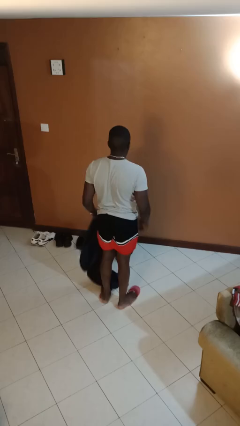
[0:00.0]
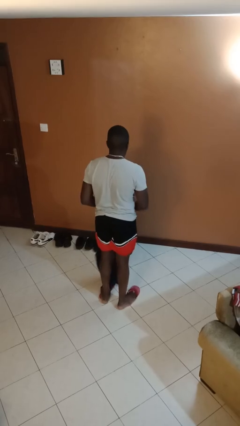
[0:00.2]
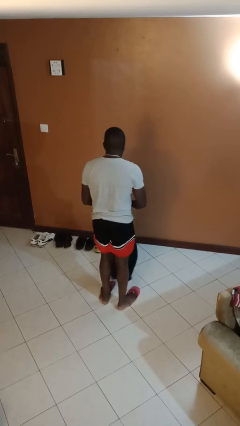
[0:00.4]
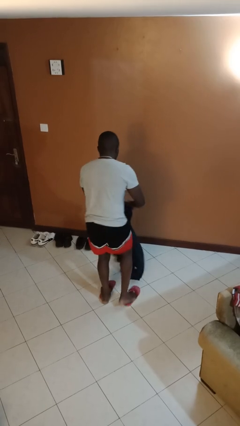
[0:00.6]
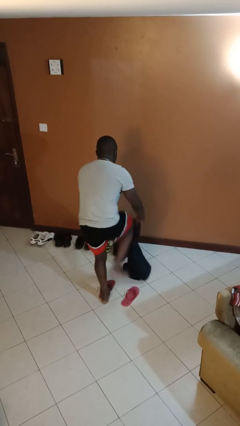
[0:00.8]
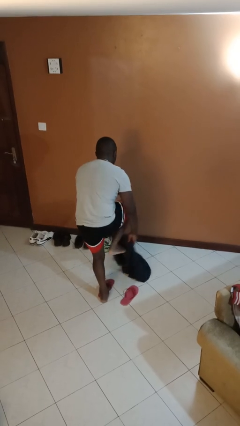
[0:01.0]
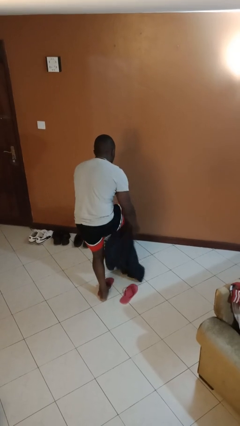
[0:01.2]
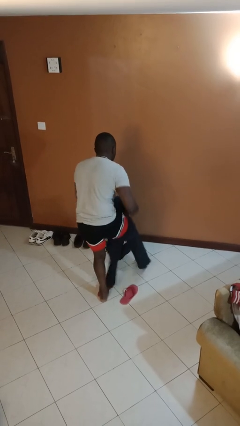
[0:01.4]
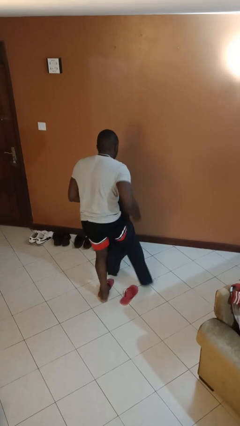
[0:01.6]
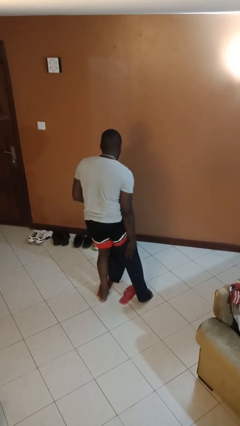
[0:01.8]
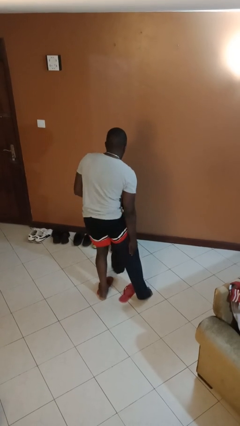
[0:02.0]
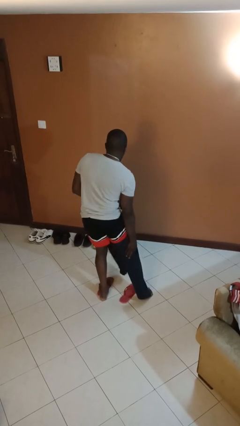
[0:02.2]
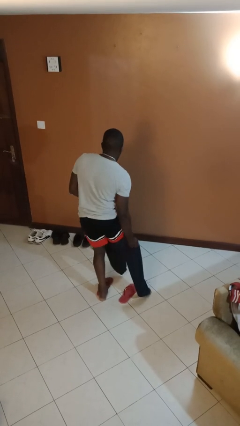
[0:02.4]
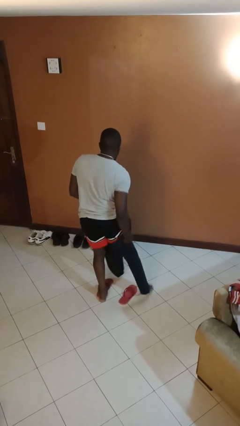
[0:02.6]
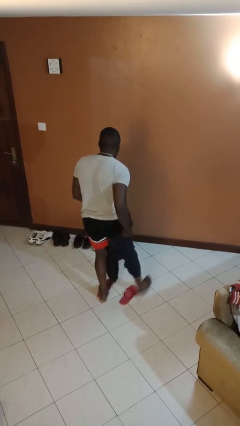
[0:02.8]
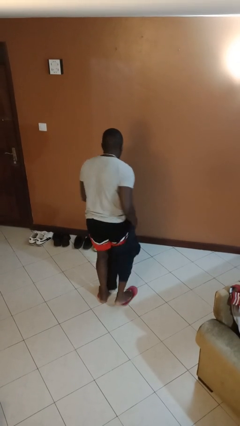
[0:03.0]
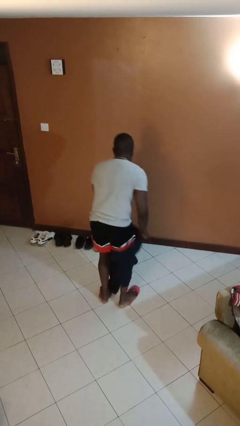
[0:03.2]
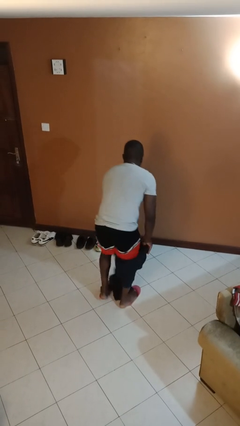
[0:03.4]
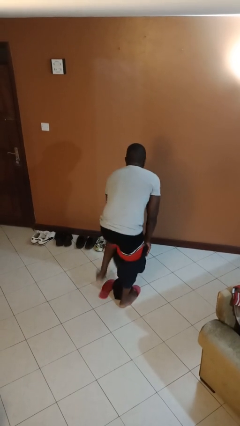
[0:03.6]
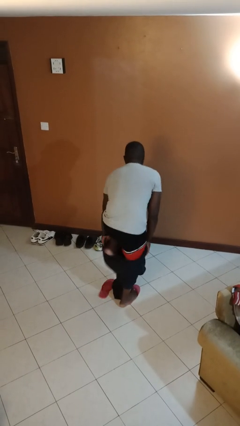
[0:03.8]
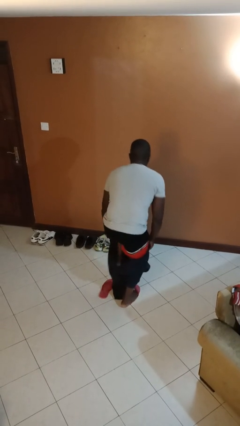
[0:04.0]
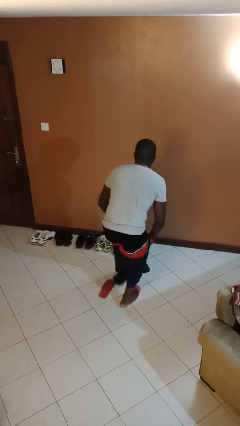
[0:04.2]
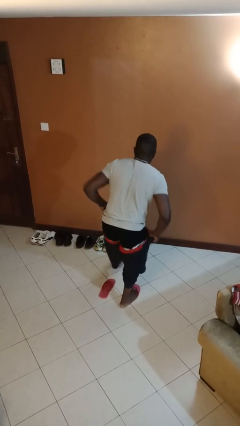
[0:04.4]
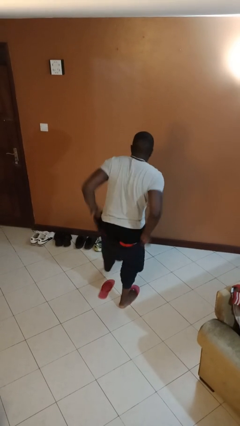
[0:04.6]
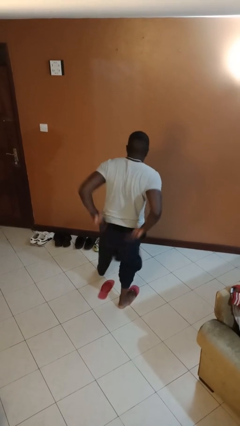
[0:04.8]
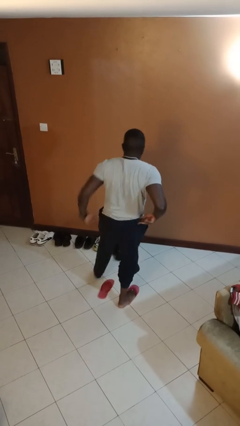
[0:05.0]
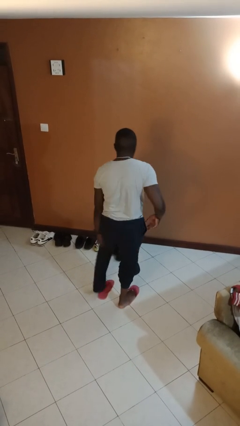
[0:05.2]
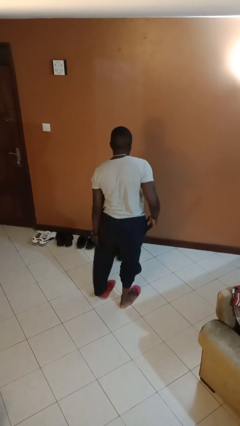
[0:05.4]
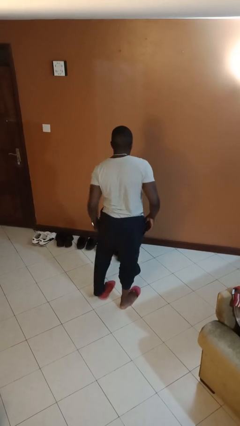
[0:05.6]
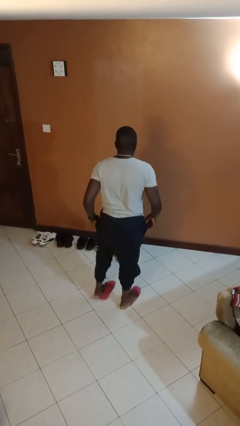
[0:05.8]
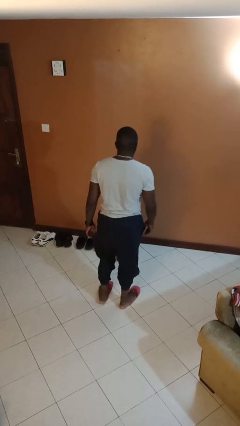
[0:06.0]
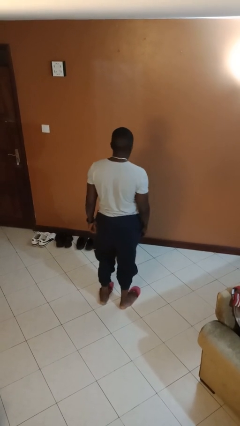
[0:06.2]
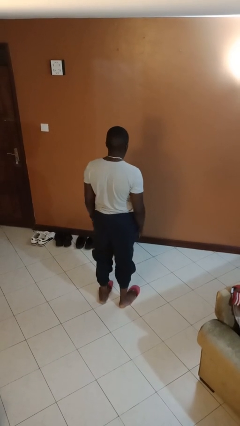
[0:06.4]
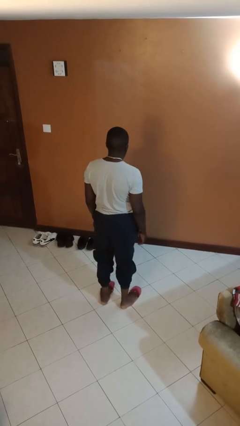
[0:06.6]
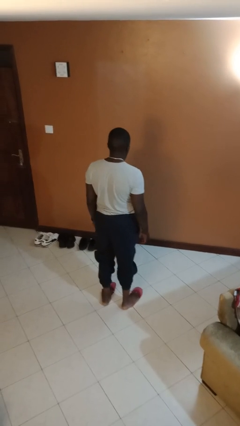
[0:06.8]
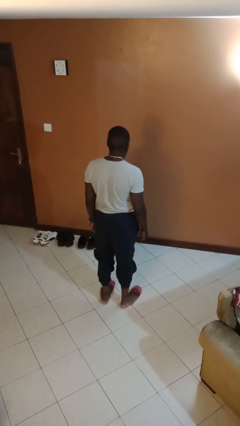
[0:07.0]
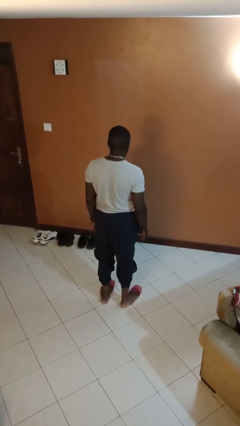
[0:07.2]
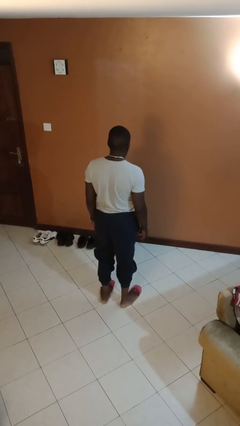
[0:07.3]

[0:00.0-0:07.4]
person puts on pants

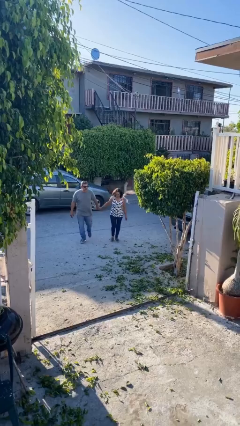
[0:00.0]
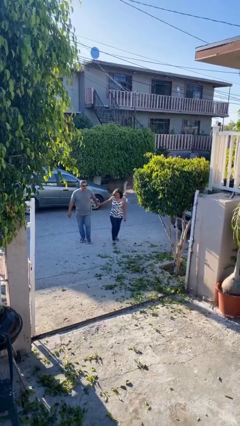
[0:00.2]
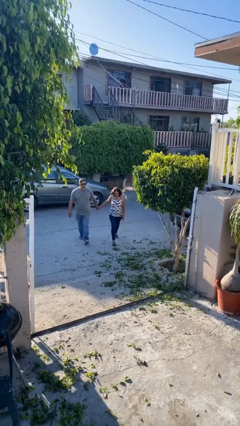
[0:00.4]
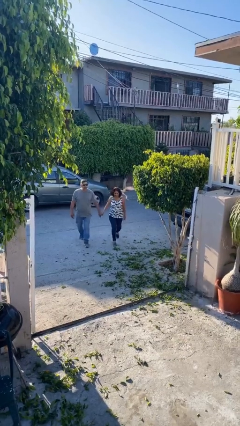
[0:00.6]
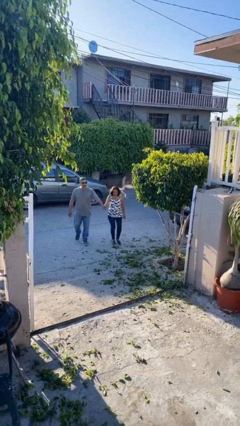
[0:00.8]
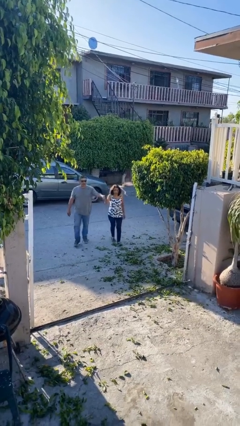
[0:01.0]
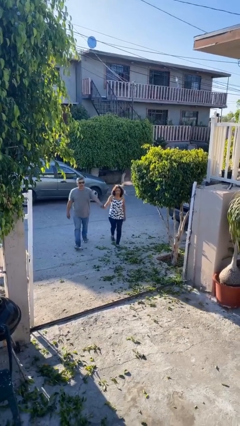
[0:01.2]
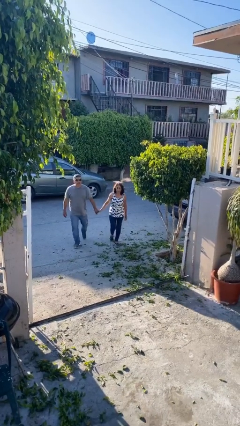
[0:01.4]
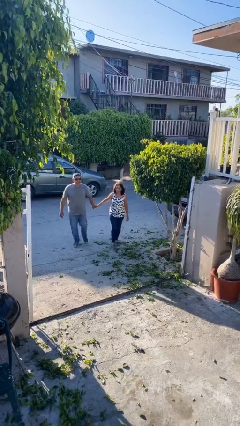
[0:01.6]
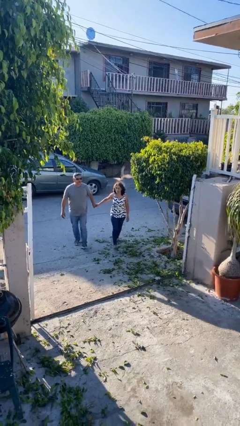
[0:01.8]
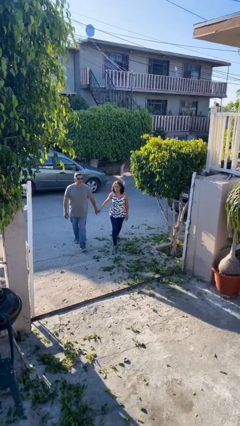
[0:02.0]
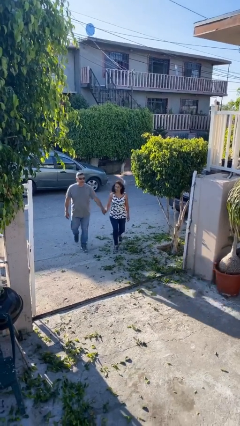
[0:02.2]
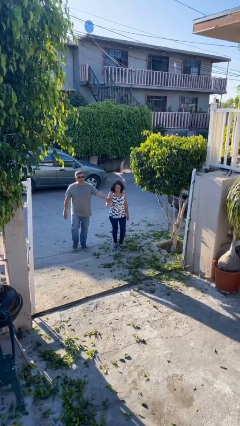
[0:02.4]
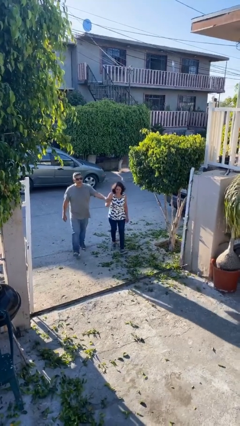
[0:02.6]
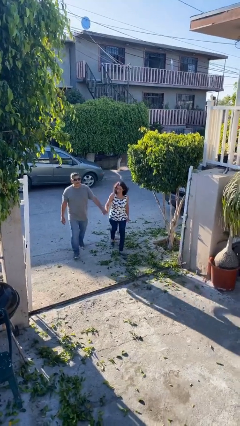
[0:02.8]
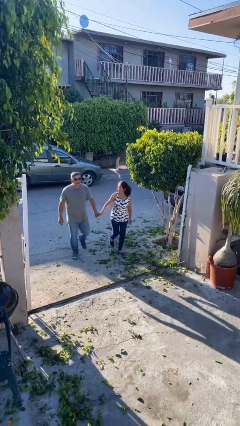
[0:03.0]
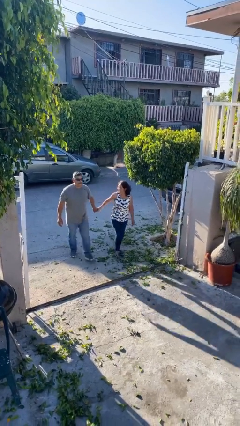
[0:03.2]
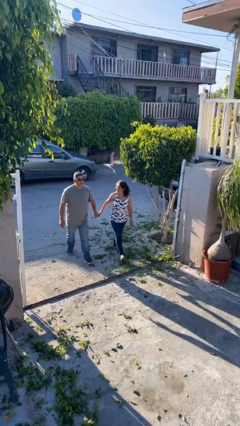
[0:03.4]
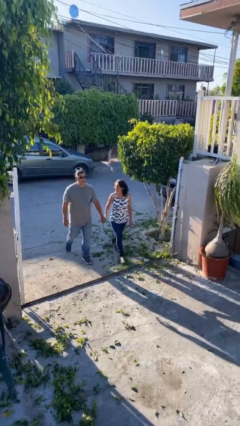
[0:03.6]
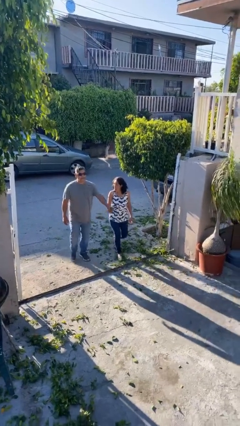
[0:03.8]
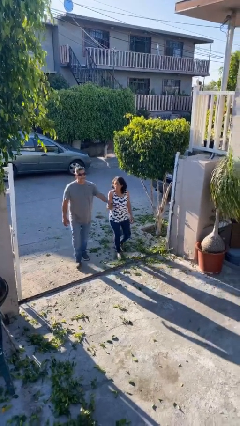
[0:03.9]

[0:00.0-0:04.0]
person holds hand

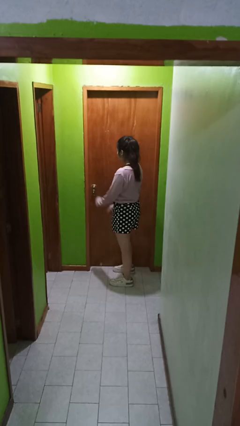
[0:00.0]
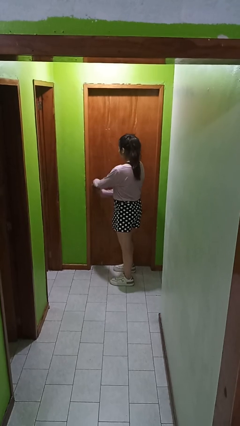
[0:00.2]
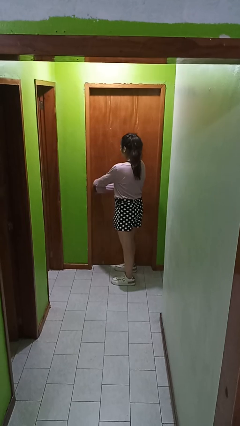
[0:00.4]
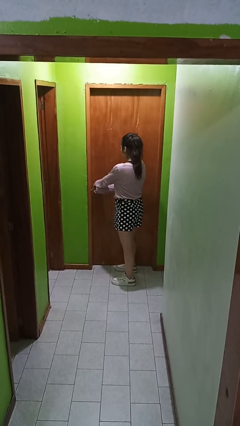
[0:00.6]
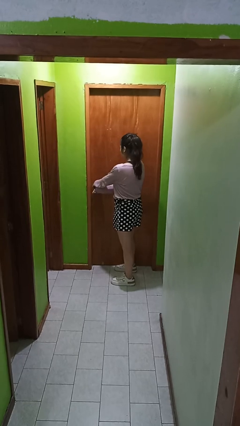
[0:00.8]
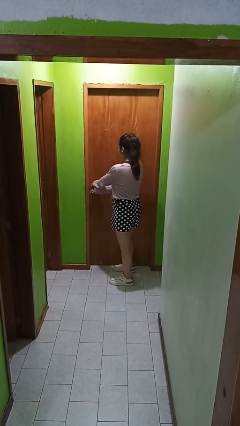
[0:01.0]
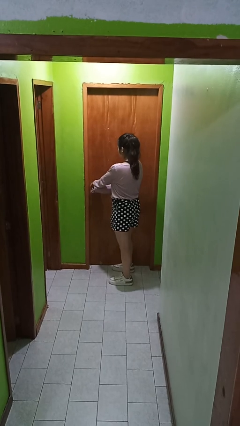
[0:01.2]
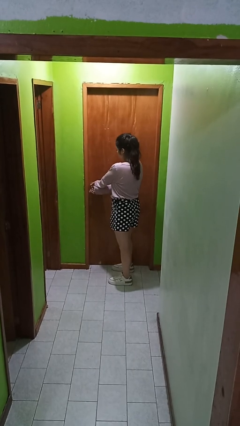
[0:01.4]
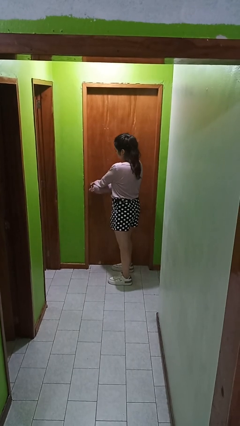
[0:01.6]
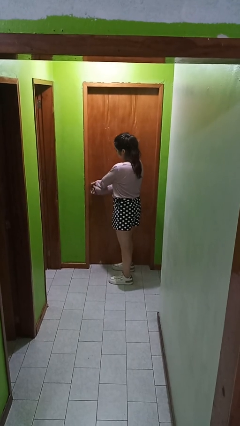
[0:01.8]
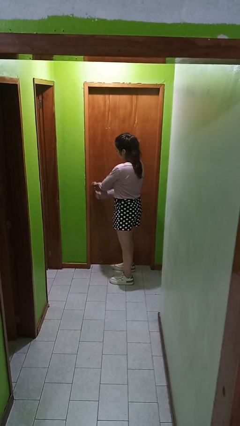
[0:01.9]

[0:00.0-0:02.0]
person locks door with keys

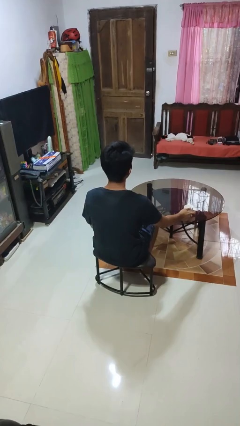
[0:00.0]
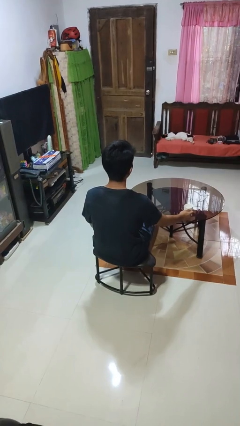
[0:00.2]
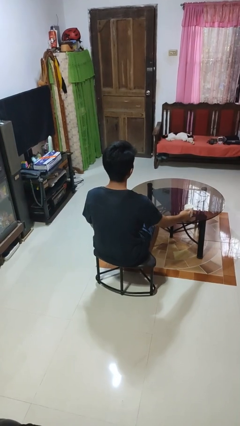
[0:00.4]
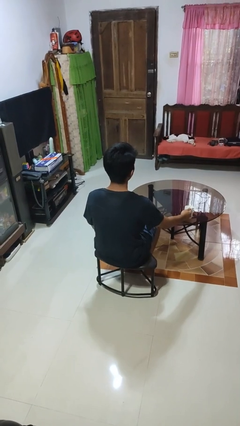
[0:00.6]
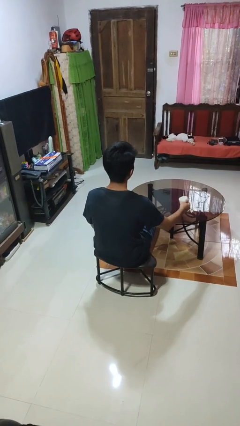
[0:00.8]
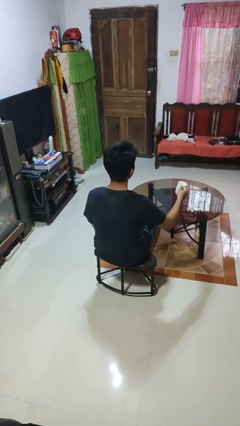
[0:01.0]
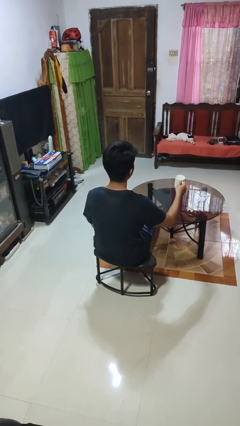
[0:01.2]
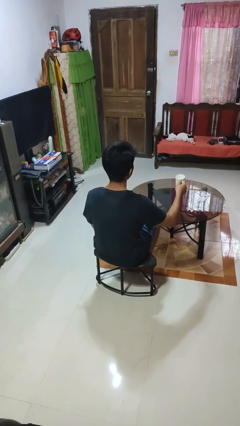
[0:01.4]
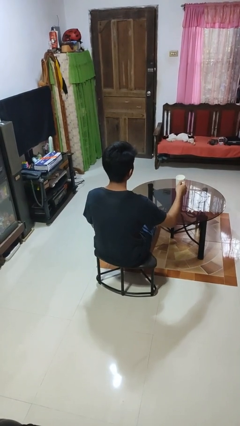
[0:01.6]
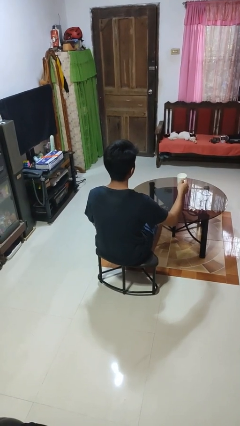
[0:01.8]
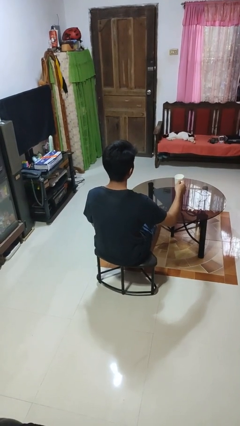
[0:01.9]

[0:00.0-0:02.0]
person picks up object from table

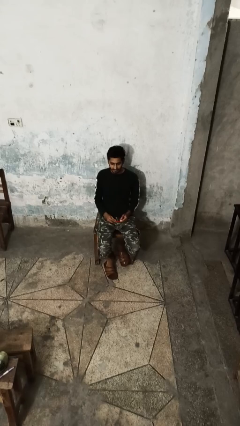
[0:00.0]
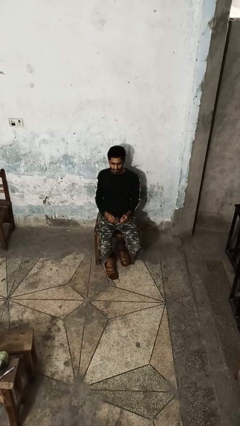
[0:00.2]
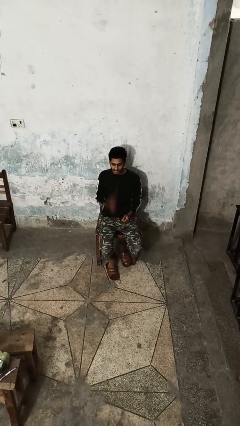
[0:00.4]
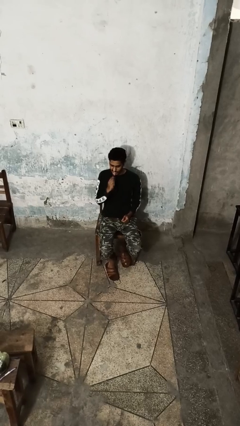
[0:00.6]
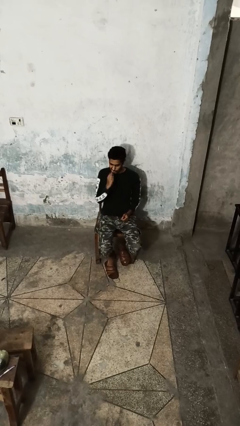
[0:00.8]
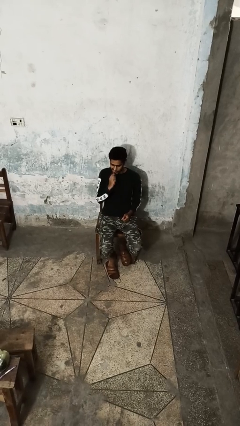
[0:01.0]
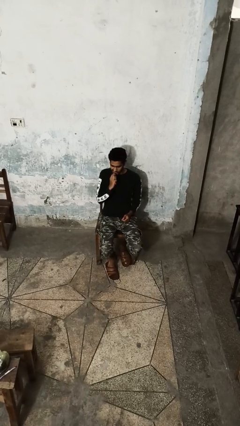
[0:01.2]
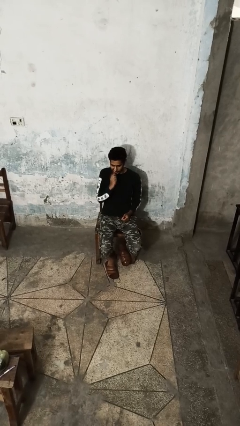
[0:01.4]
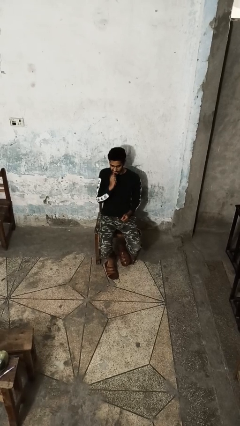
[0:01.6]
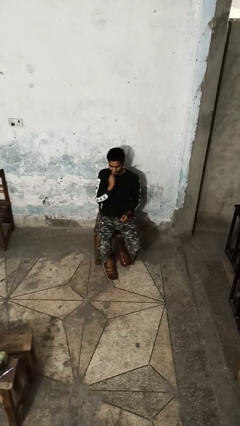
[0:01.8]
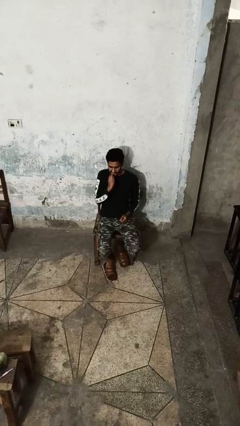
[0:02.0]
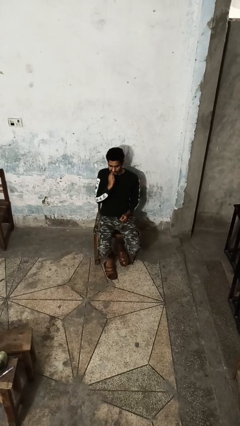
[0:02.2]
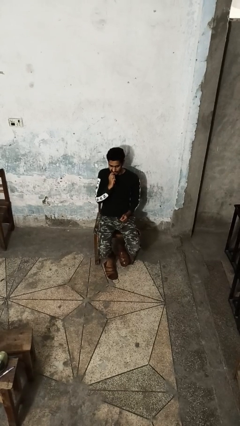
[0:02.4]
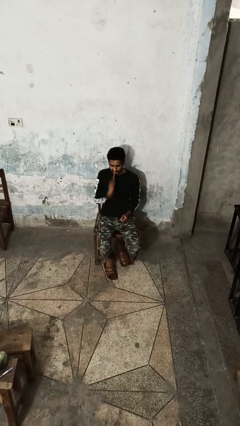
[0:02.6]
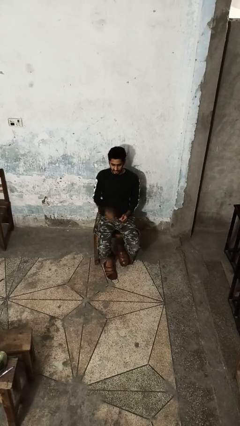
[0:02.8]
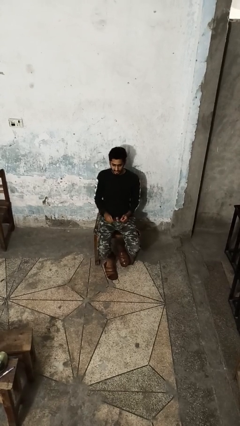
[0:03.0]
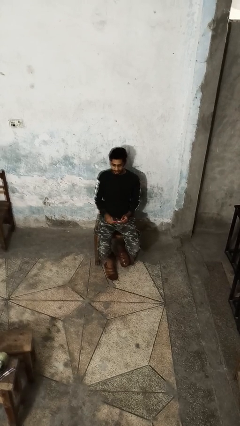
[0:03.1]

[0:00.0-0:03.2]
person brushes teeth
